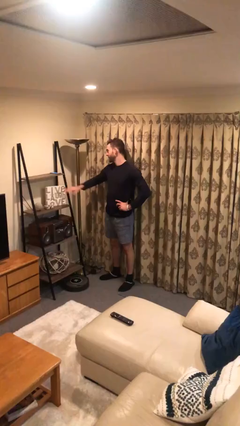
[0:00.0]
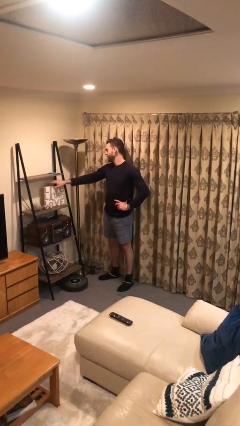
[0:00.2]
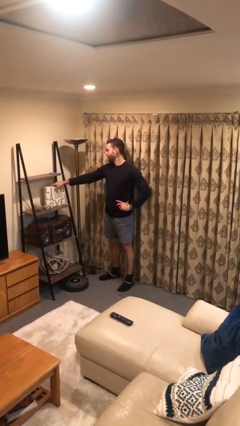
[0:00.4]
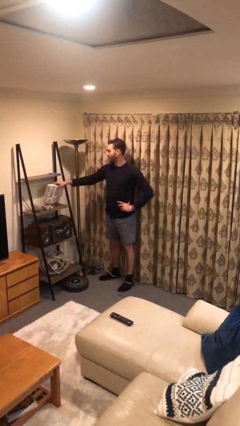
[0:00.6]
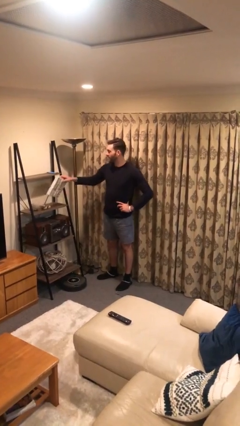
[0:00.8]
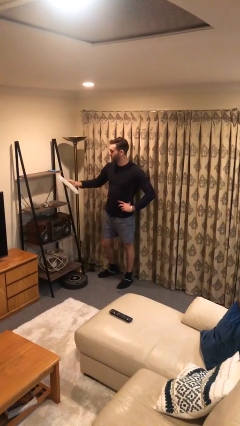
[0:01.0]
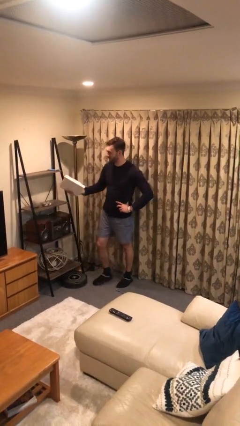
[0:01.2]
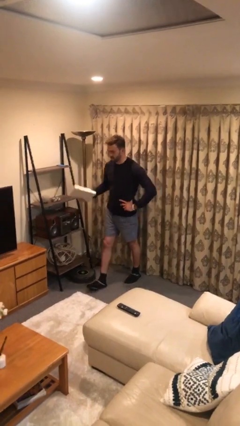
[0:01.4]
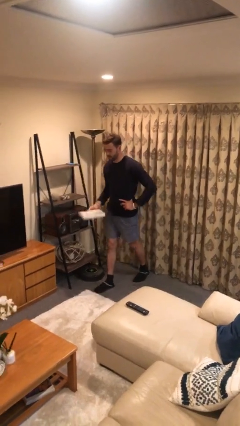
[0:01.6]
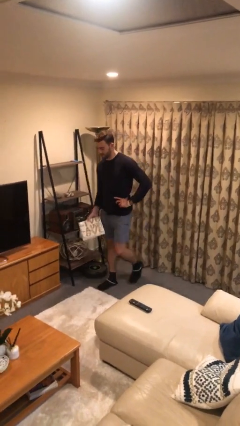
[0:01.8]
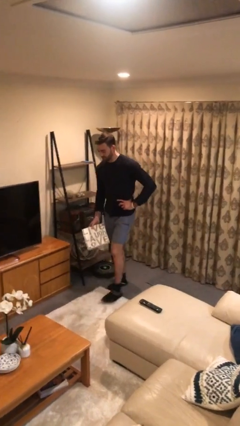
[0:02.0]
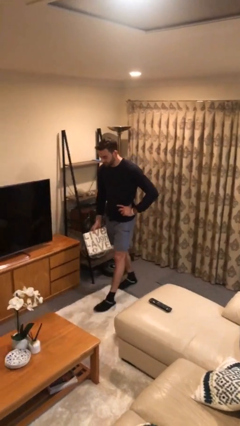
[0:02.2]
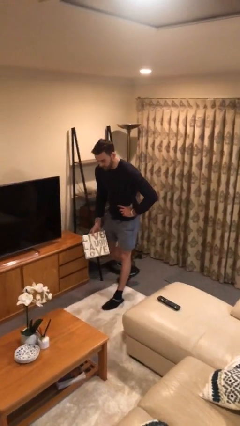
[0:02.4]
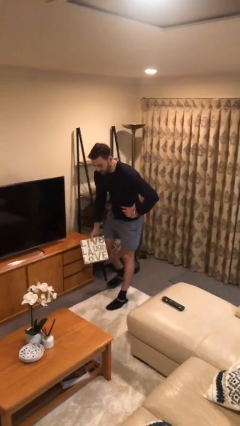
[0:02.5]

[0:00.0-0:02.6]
person picks up object from table

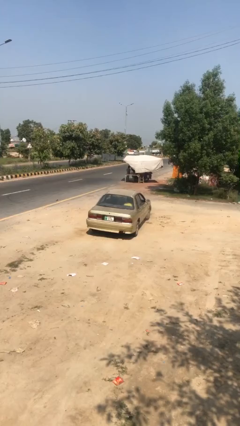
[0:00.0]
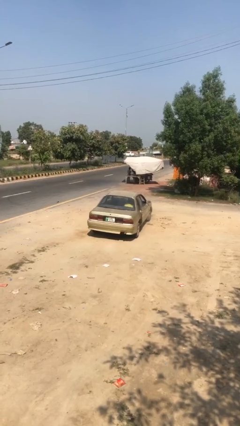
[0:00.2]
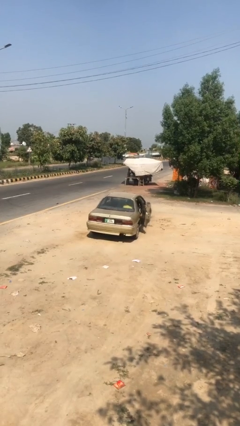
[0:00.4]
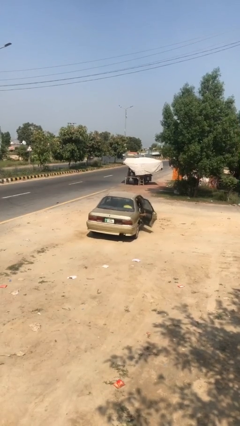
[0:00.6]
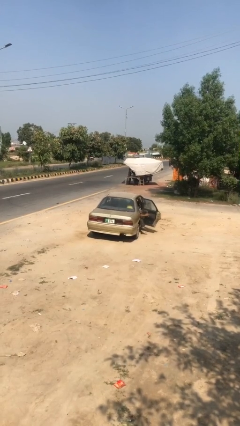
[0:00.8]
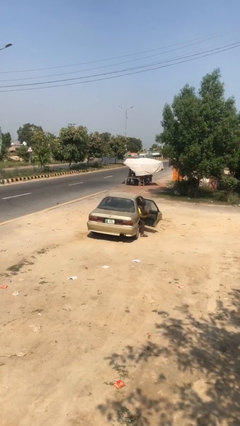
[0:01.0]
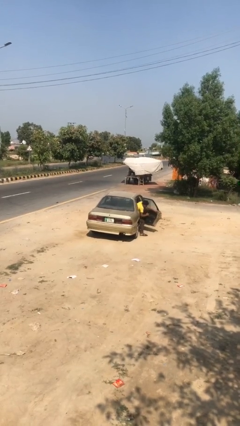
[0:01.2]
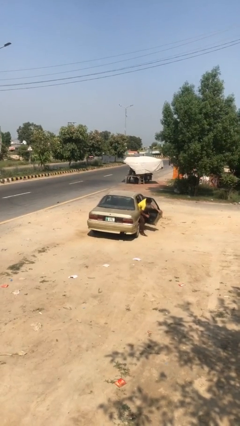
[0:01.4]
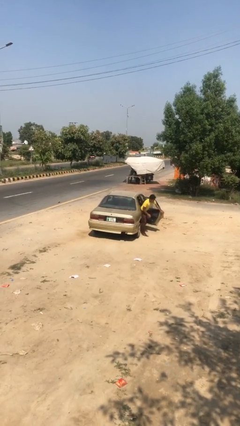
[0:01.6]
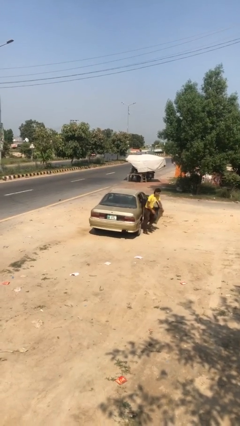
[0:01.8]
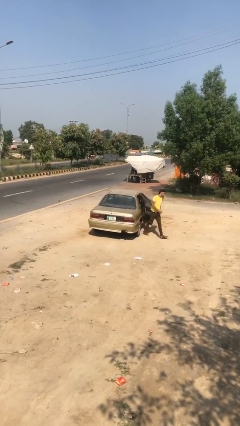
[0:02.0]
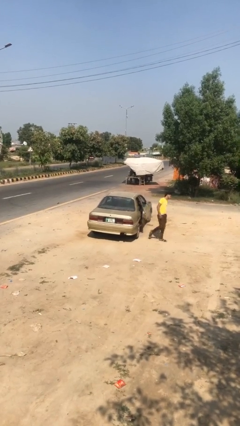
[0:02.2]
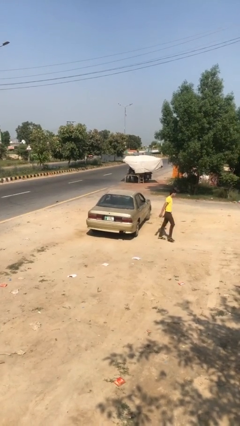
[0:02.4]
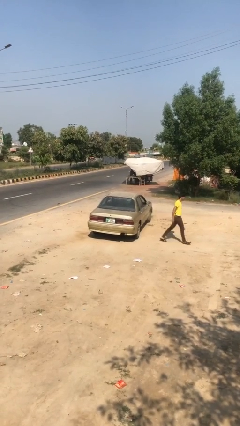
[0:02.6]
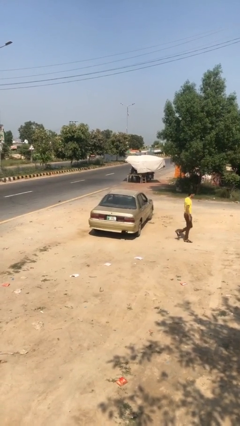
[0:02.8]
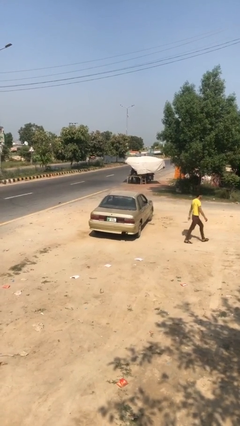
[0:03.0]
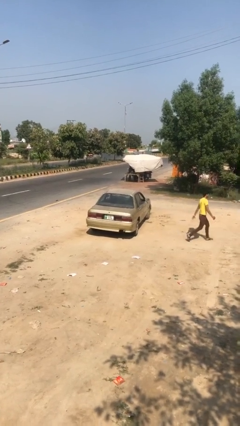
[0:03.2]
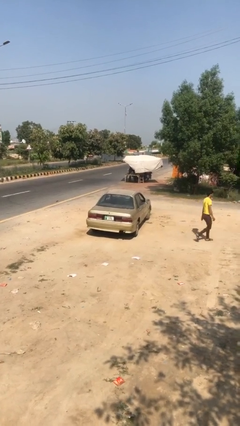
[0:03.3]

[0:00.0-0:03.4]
car drops off person

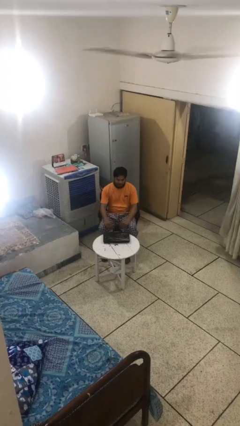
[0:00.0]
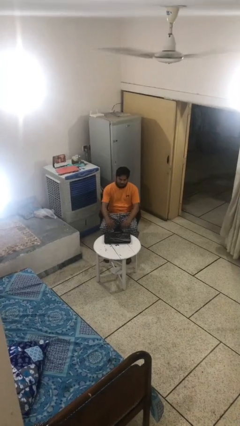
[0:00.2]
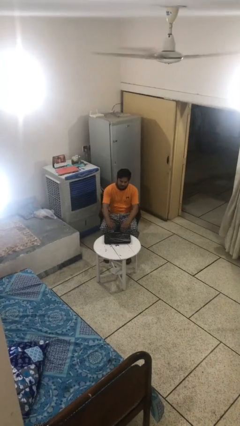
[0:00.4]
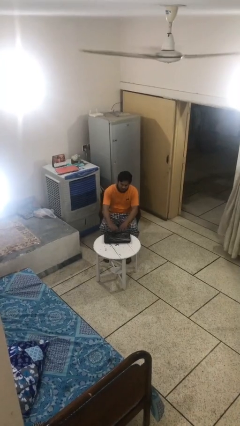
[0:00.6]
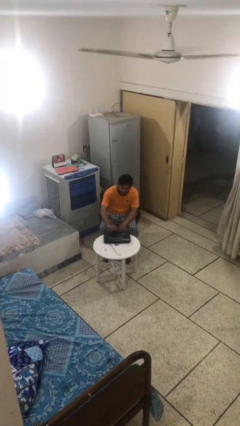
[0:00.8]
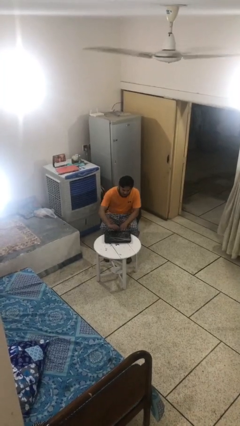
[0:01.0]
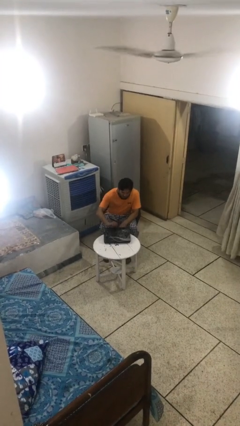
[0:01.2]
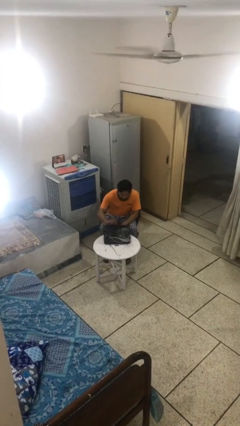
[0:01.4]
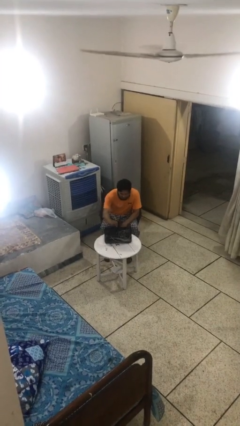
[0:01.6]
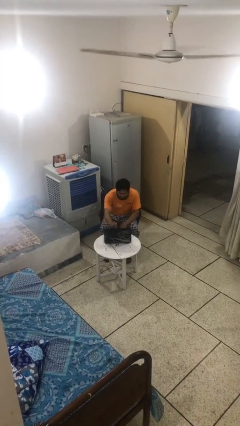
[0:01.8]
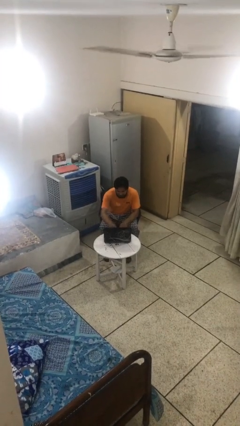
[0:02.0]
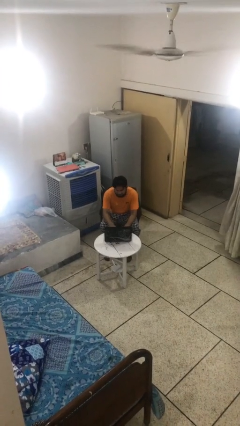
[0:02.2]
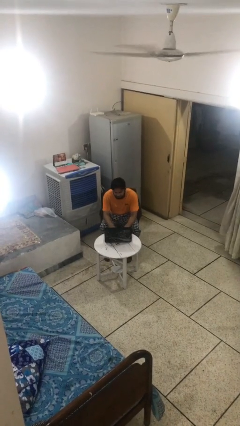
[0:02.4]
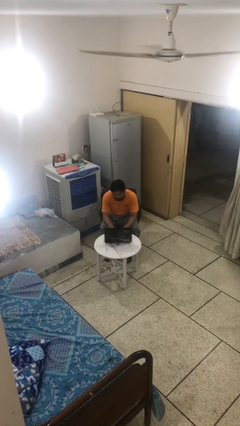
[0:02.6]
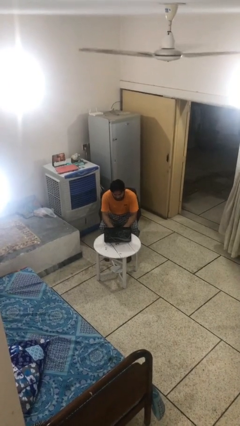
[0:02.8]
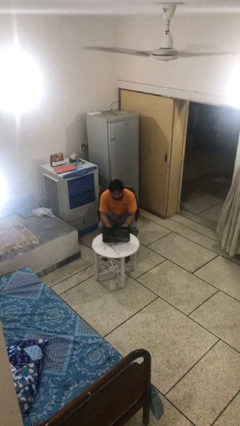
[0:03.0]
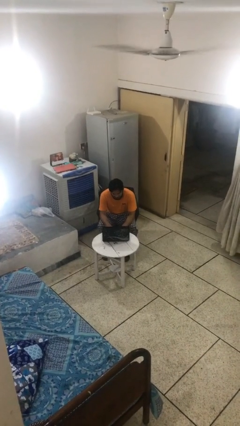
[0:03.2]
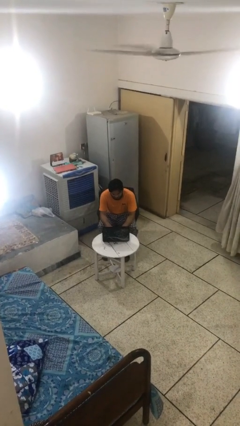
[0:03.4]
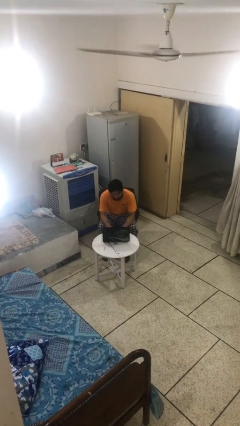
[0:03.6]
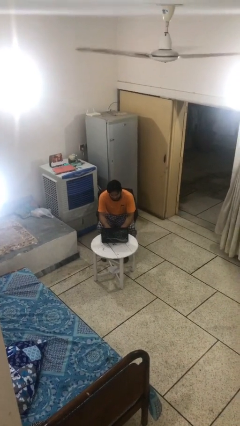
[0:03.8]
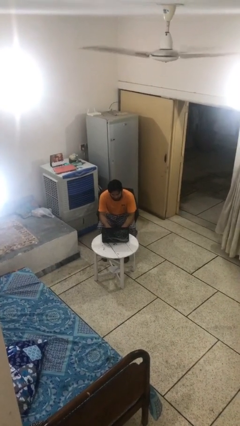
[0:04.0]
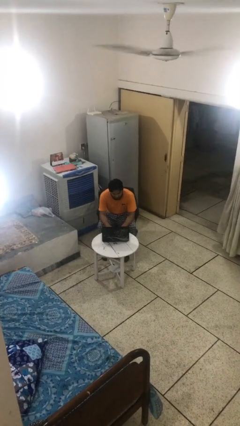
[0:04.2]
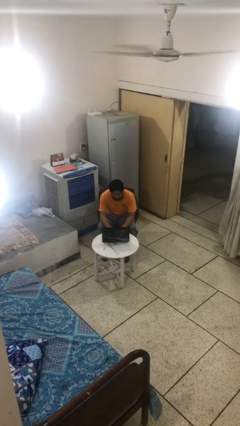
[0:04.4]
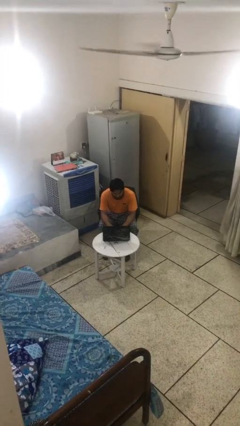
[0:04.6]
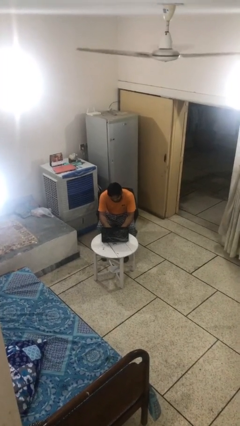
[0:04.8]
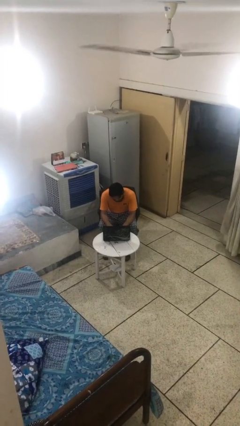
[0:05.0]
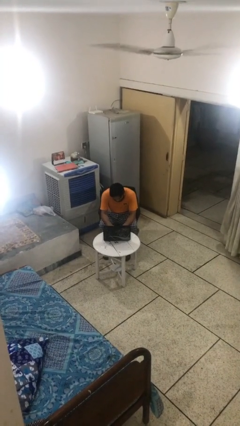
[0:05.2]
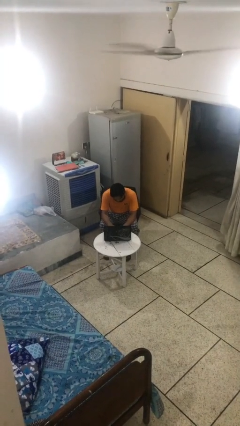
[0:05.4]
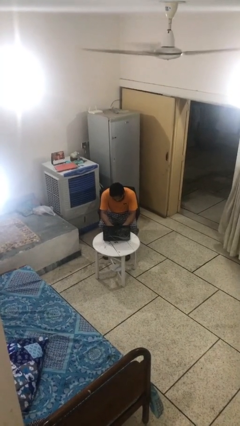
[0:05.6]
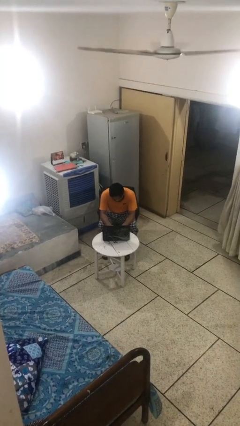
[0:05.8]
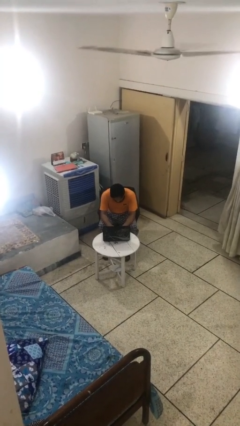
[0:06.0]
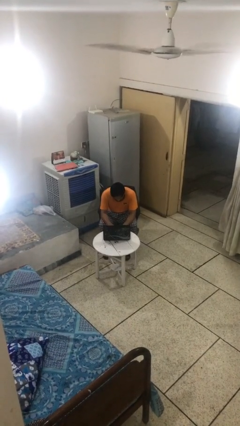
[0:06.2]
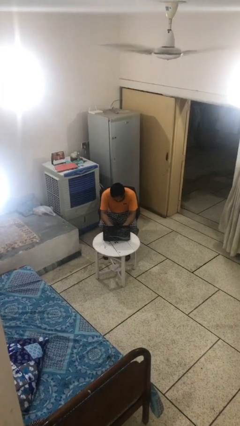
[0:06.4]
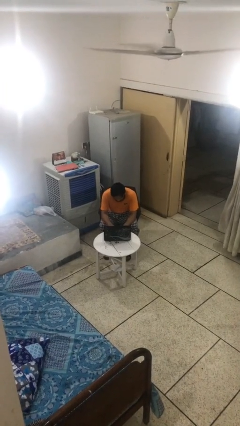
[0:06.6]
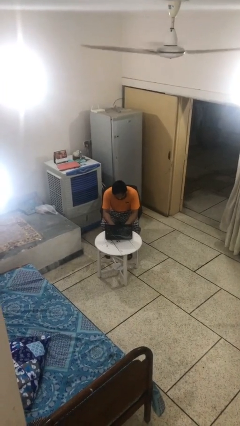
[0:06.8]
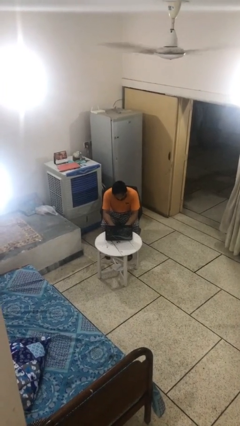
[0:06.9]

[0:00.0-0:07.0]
person interacts with laptop

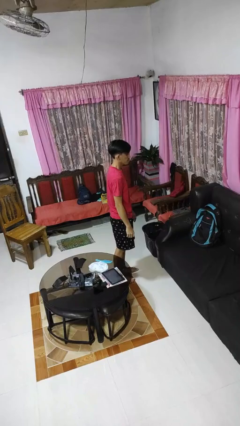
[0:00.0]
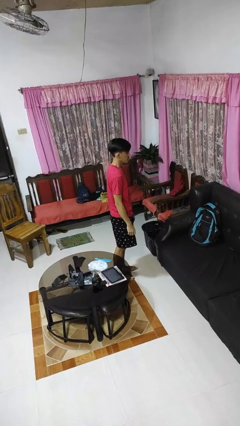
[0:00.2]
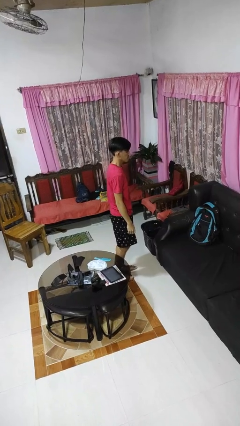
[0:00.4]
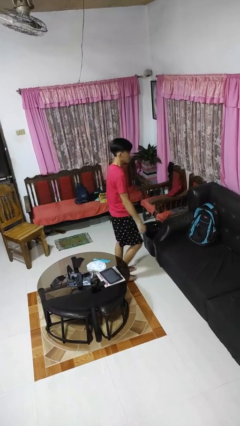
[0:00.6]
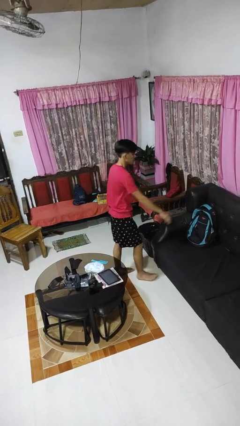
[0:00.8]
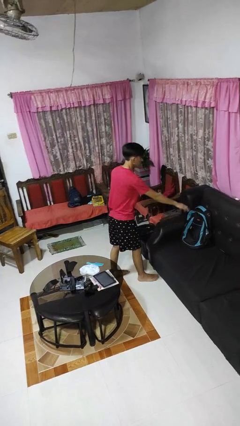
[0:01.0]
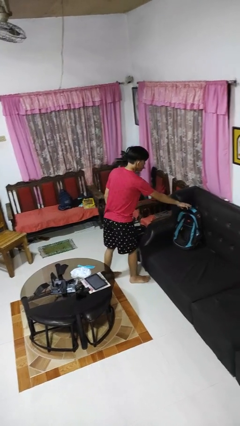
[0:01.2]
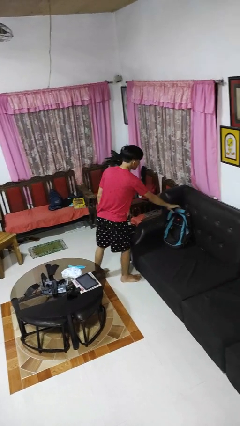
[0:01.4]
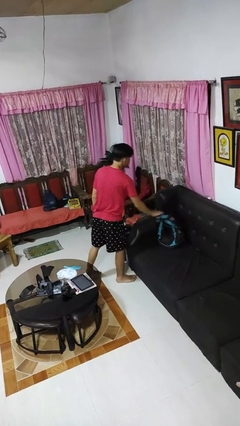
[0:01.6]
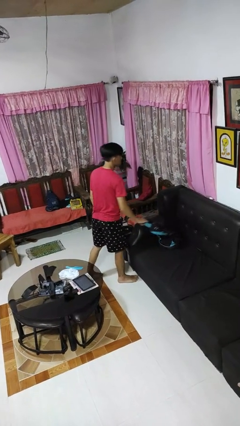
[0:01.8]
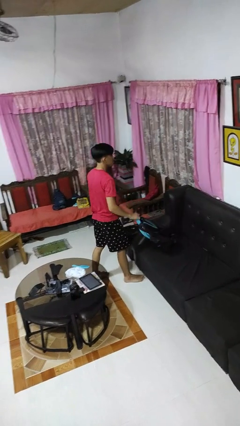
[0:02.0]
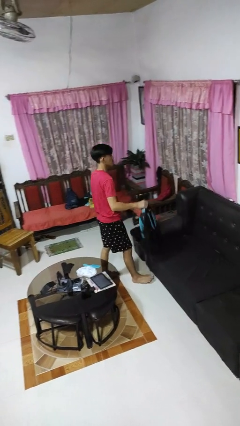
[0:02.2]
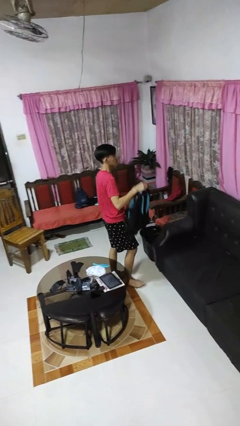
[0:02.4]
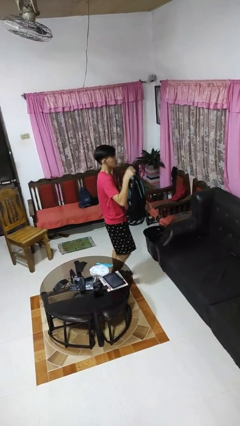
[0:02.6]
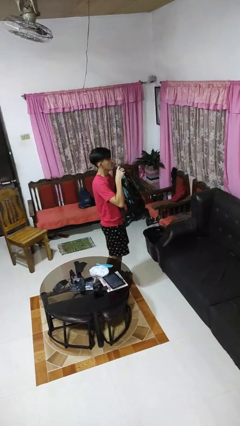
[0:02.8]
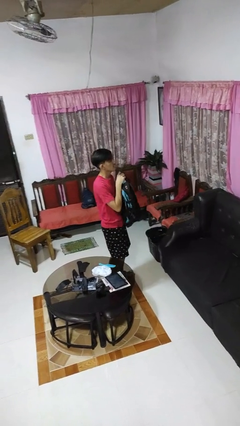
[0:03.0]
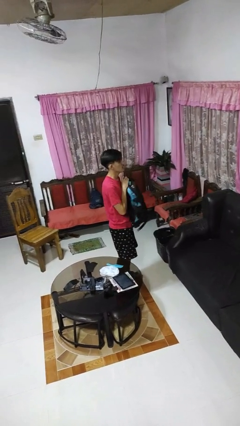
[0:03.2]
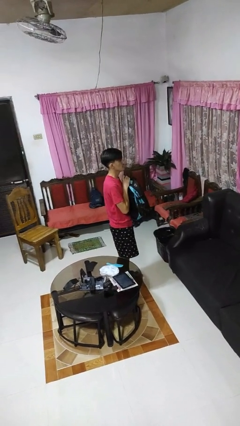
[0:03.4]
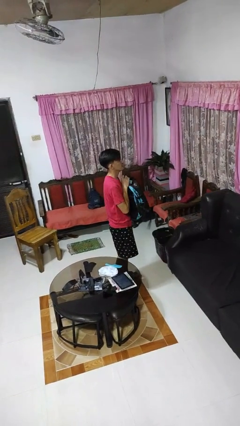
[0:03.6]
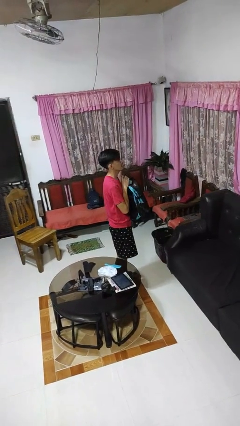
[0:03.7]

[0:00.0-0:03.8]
person picks up object from couch

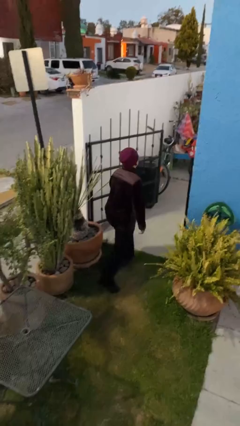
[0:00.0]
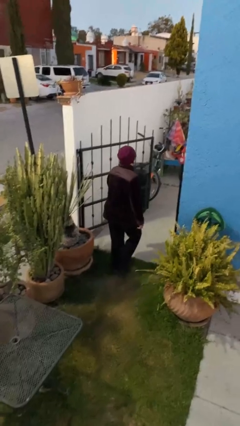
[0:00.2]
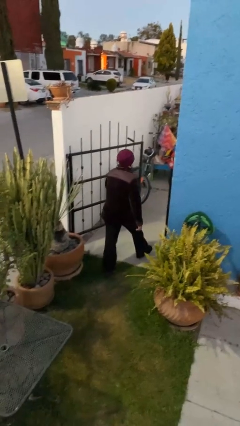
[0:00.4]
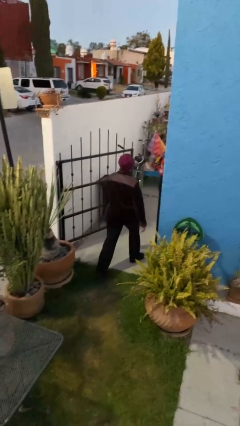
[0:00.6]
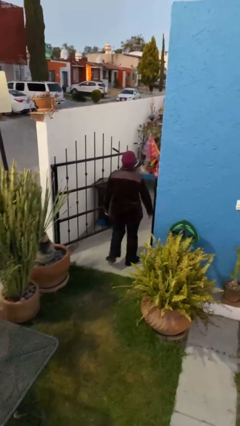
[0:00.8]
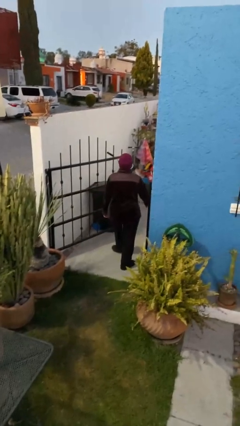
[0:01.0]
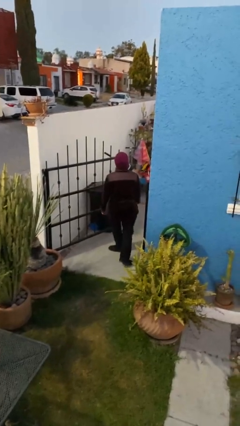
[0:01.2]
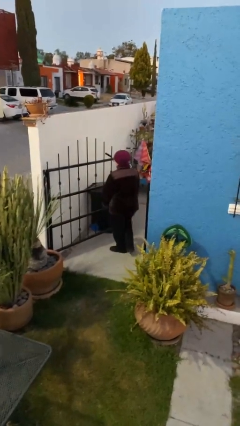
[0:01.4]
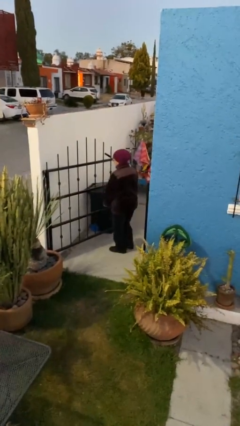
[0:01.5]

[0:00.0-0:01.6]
person enters scene through structure
